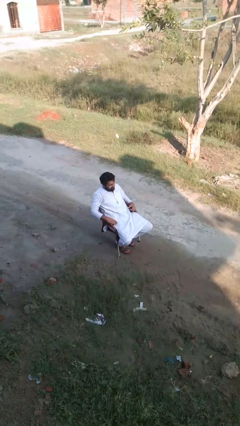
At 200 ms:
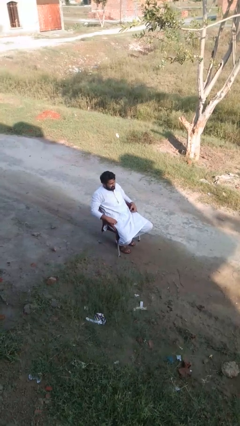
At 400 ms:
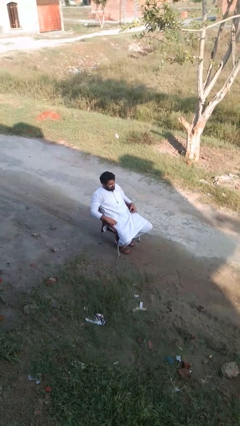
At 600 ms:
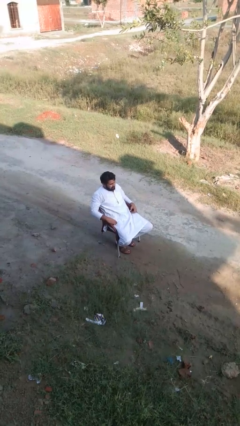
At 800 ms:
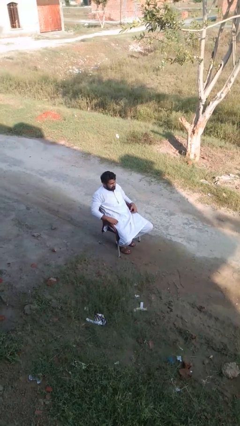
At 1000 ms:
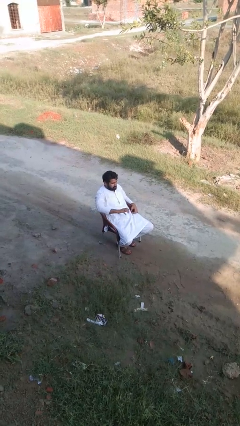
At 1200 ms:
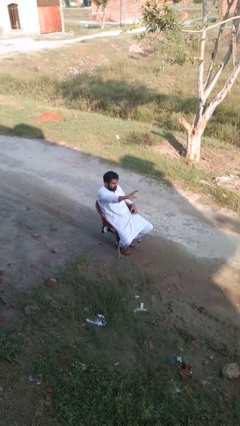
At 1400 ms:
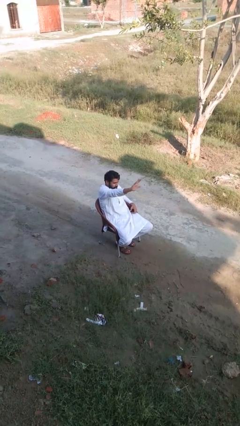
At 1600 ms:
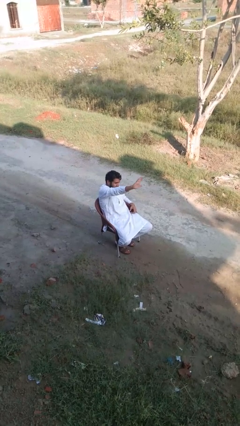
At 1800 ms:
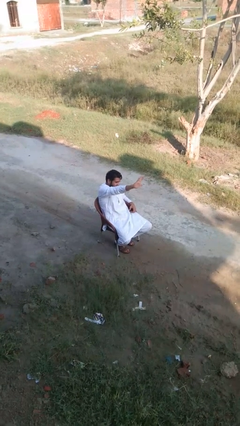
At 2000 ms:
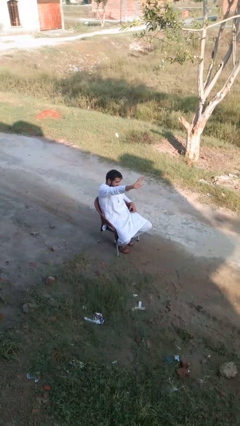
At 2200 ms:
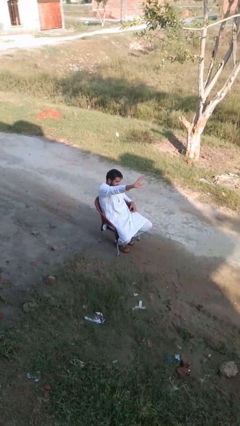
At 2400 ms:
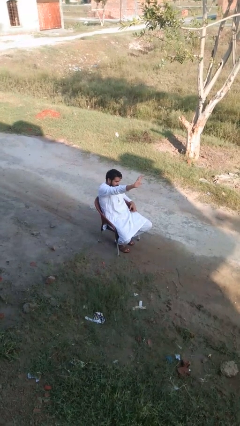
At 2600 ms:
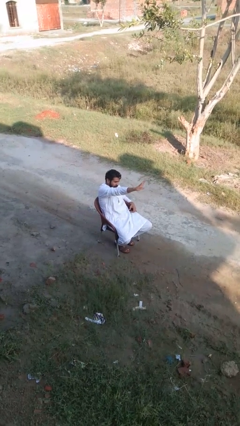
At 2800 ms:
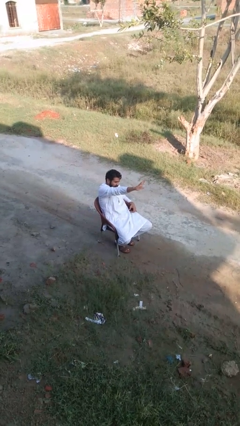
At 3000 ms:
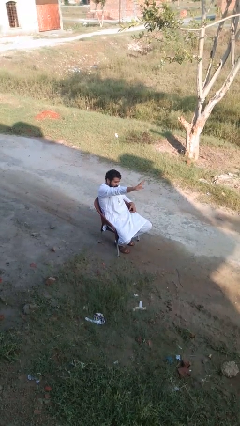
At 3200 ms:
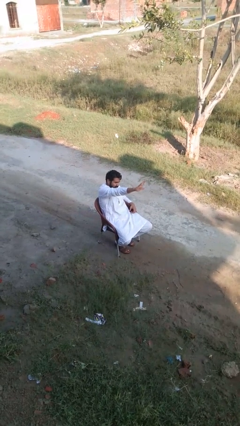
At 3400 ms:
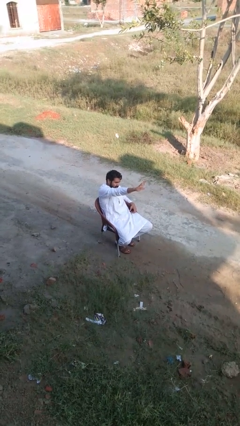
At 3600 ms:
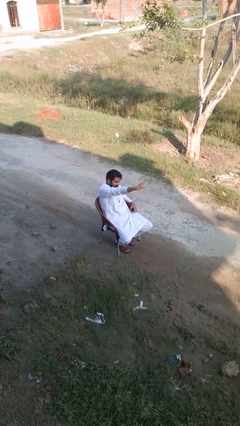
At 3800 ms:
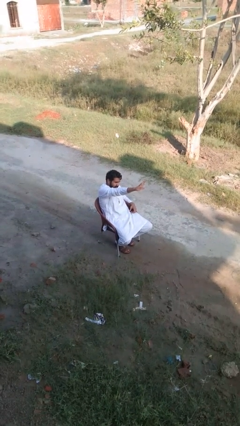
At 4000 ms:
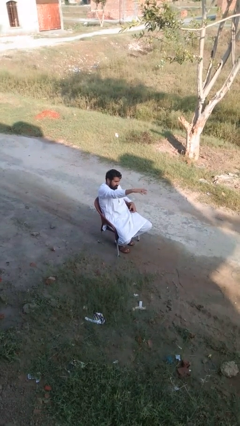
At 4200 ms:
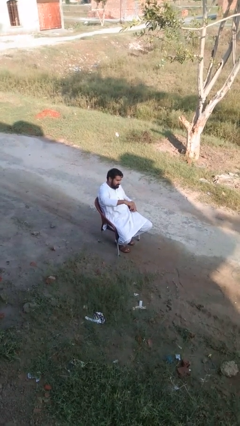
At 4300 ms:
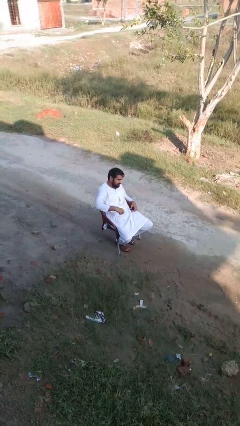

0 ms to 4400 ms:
person gestures stop

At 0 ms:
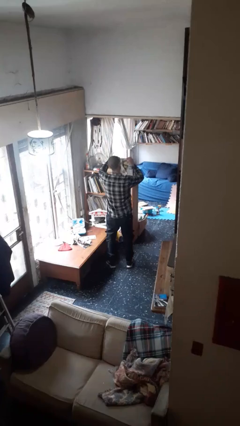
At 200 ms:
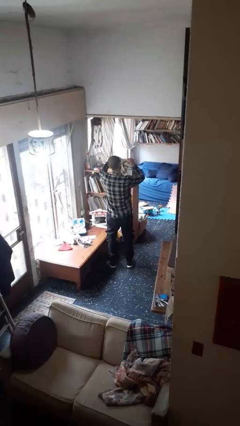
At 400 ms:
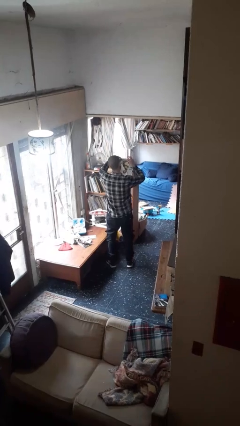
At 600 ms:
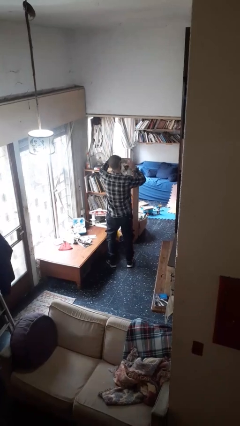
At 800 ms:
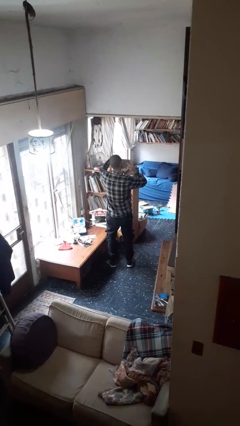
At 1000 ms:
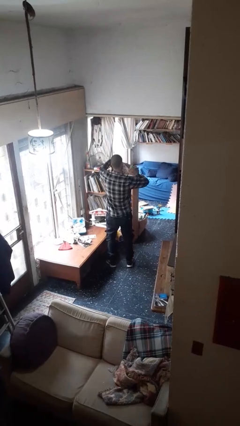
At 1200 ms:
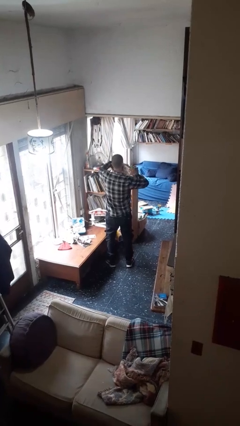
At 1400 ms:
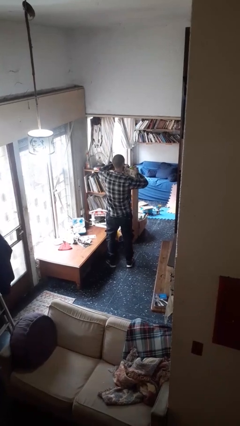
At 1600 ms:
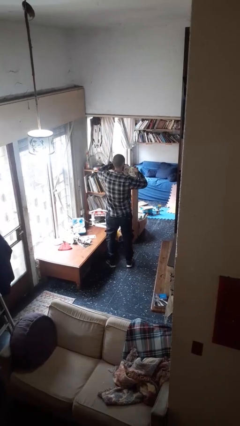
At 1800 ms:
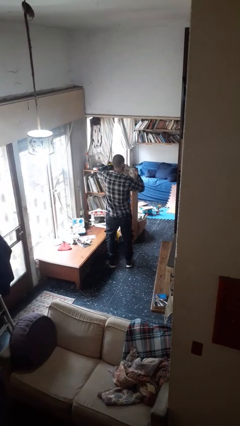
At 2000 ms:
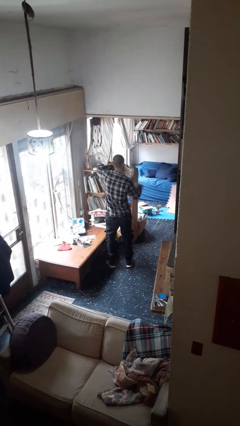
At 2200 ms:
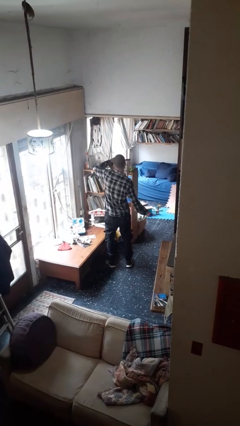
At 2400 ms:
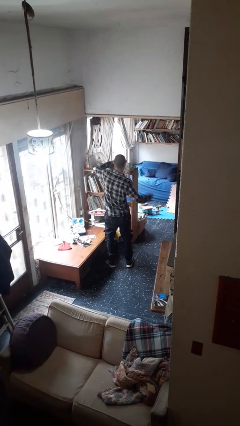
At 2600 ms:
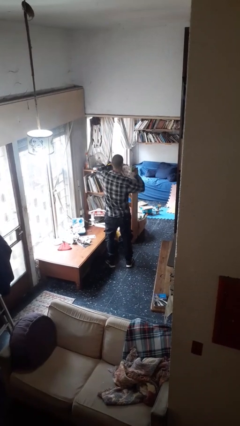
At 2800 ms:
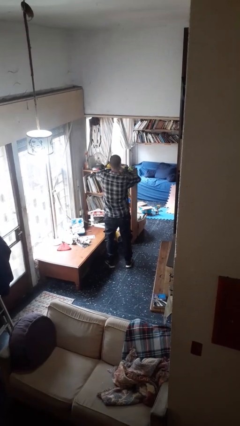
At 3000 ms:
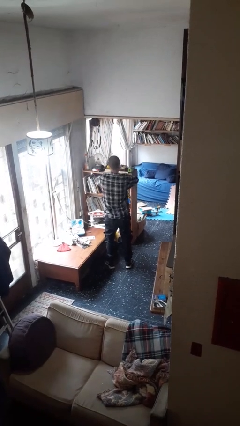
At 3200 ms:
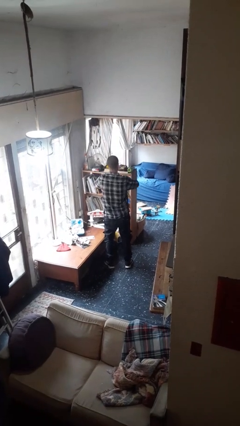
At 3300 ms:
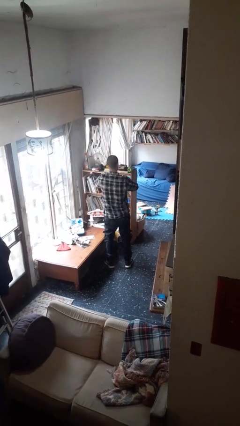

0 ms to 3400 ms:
person tears paper

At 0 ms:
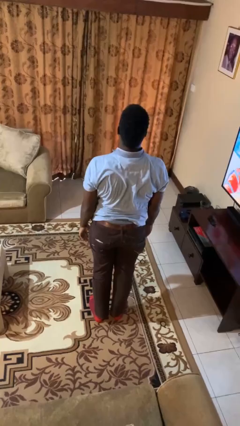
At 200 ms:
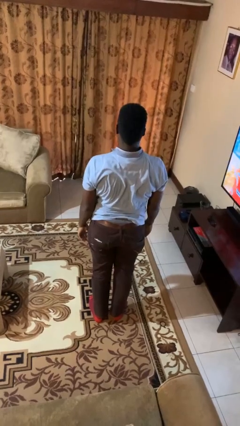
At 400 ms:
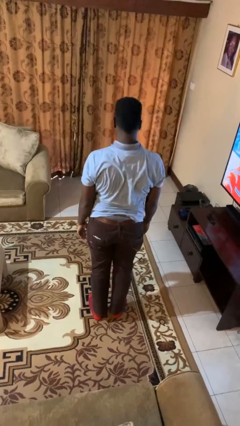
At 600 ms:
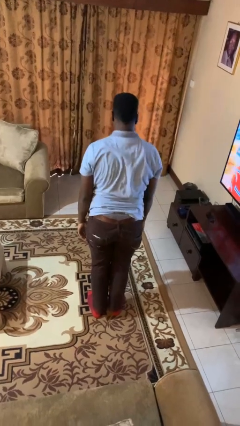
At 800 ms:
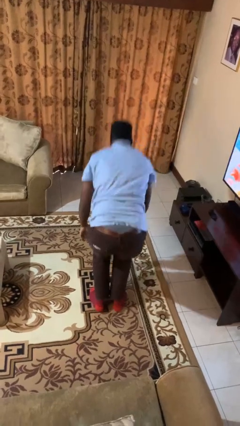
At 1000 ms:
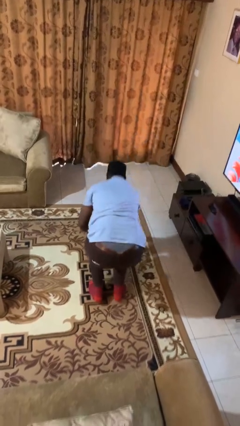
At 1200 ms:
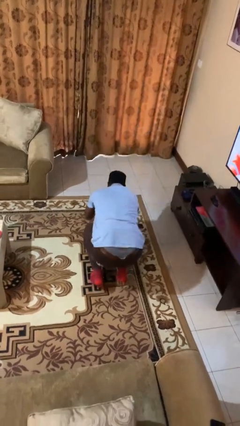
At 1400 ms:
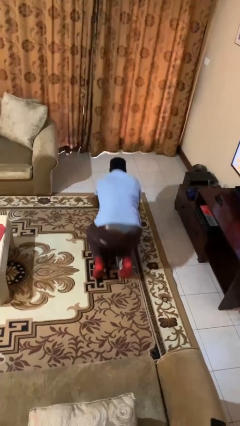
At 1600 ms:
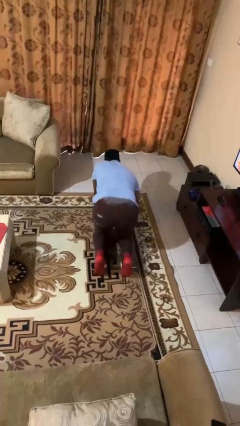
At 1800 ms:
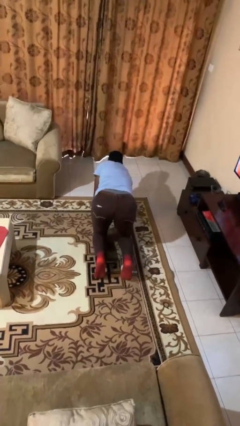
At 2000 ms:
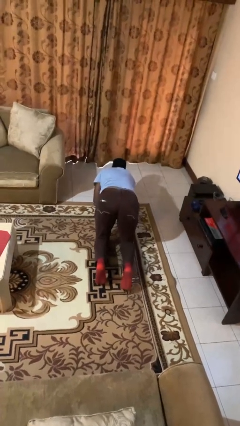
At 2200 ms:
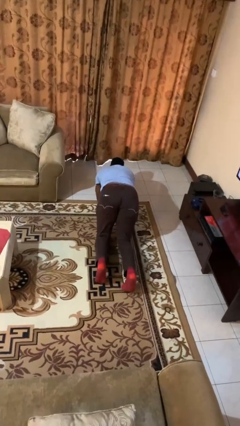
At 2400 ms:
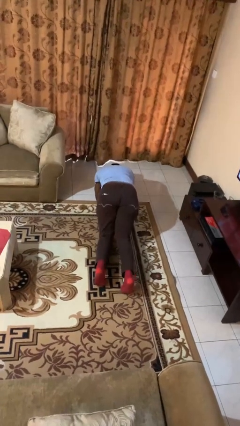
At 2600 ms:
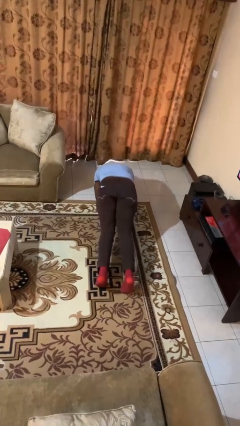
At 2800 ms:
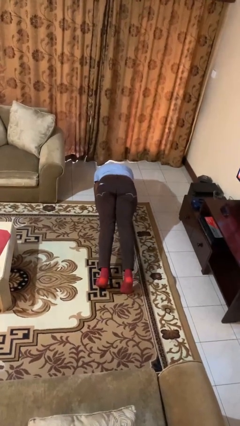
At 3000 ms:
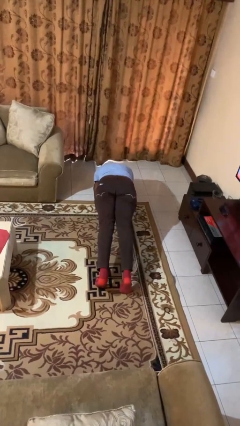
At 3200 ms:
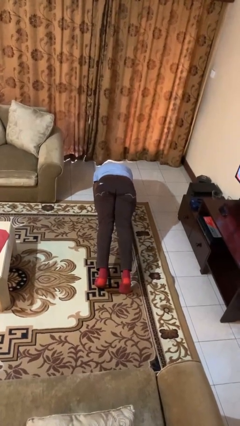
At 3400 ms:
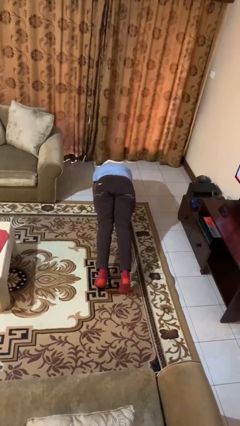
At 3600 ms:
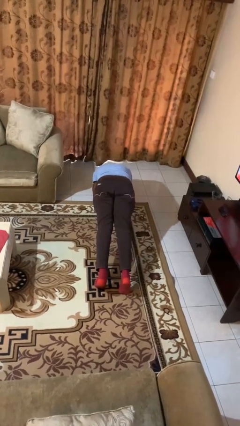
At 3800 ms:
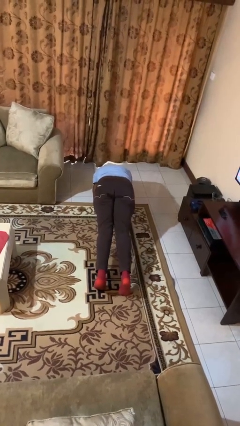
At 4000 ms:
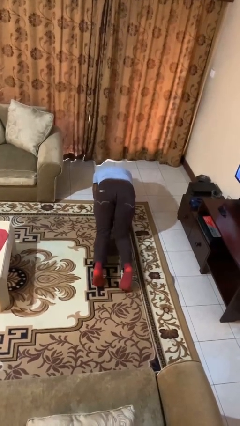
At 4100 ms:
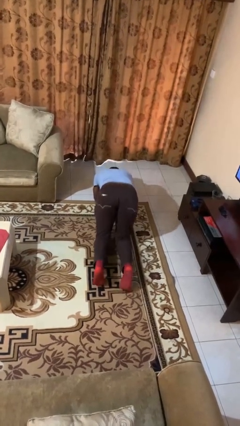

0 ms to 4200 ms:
person exercises with plank

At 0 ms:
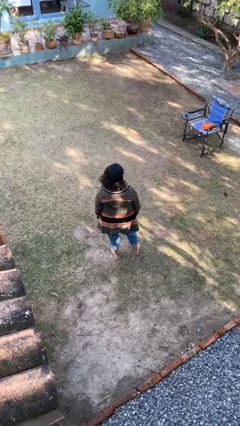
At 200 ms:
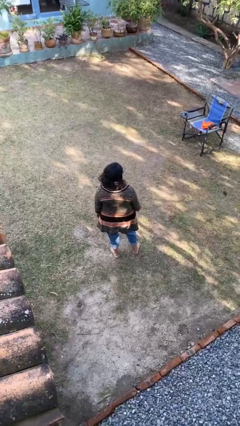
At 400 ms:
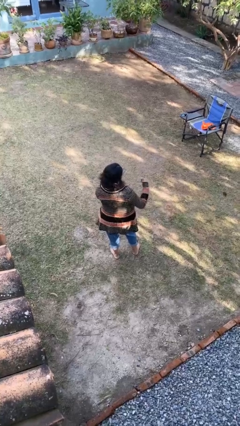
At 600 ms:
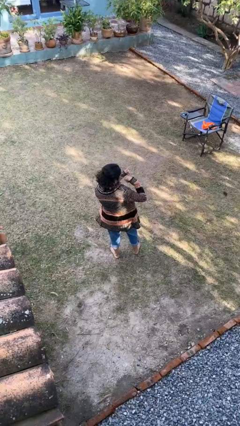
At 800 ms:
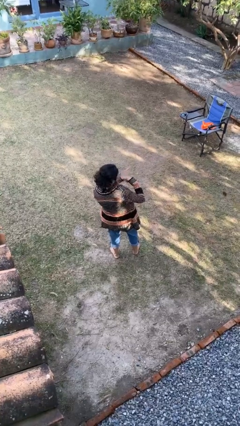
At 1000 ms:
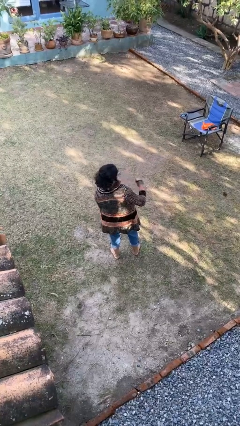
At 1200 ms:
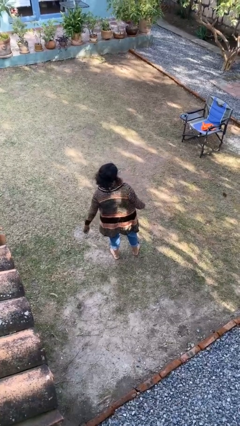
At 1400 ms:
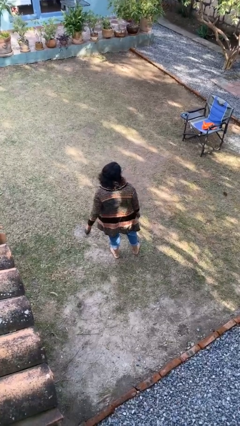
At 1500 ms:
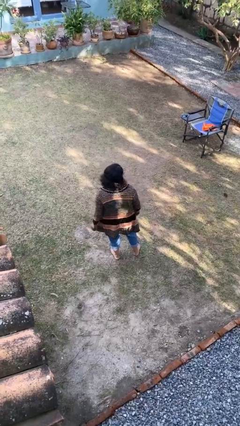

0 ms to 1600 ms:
person gestures call me

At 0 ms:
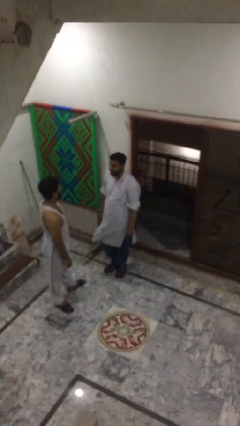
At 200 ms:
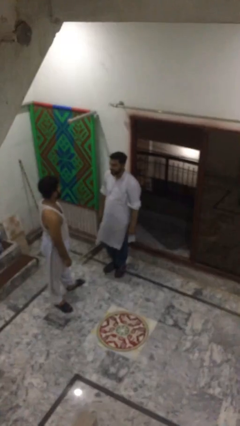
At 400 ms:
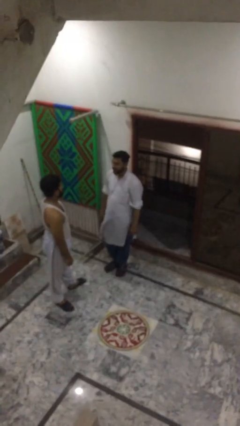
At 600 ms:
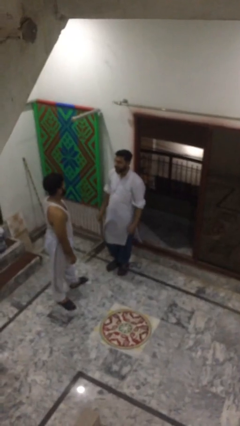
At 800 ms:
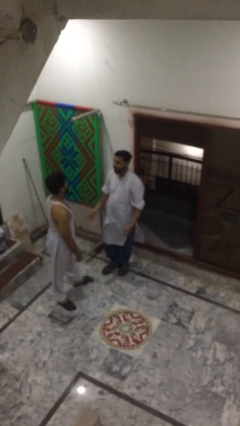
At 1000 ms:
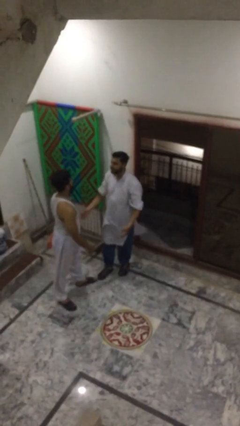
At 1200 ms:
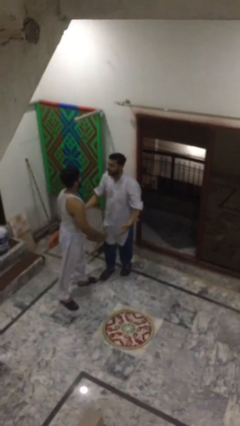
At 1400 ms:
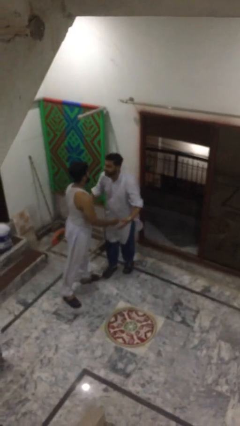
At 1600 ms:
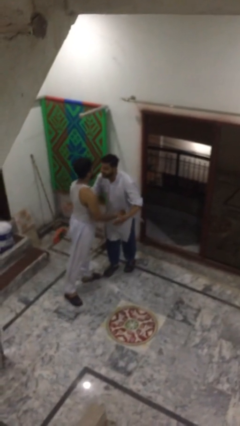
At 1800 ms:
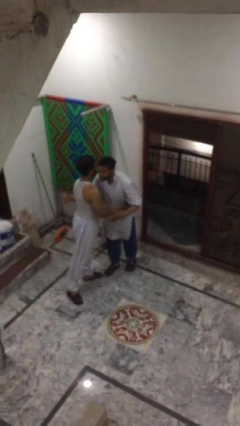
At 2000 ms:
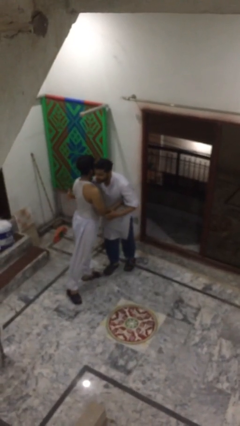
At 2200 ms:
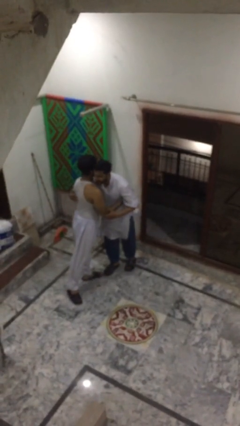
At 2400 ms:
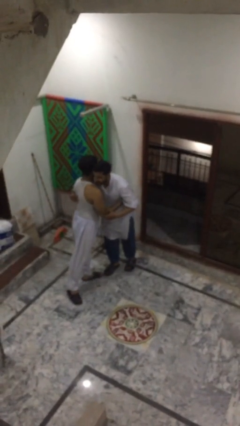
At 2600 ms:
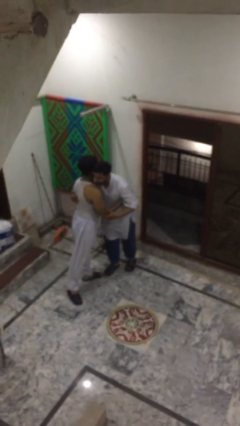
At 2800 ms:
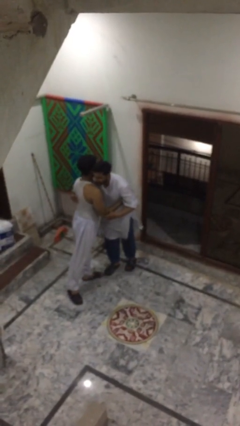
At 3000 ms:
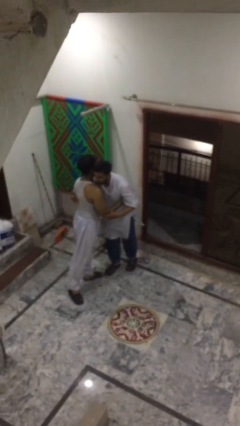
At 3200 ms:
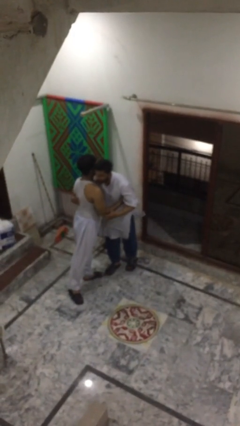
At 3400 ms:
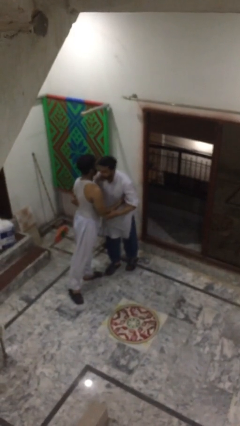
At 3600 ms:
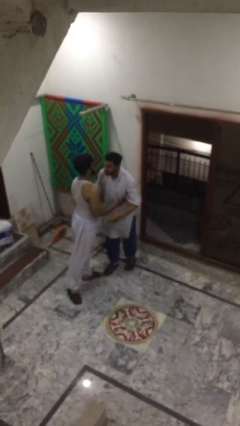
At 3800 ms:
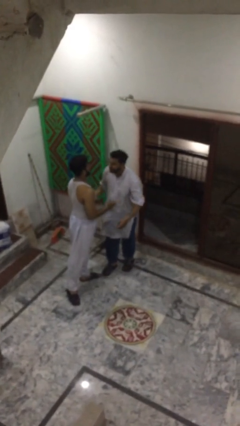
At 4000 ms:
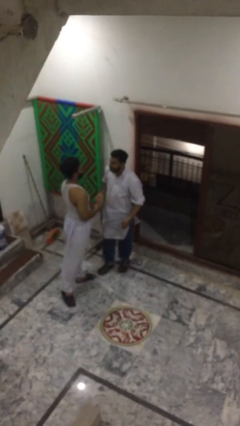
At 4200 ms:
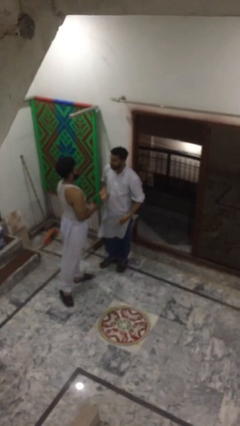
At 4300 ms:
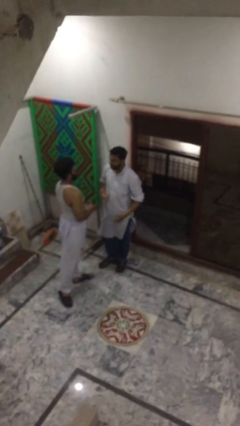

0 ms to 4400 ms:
person embraces person
